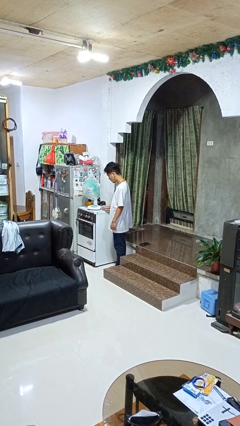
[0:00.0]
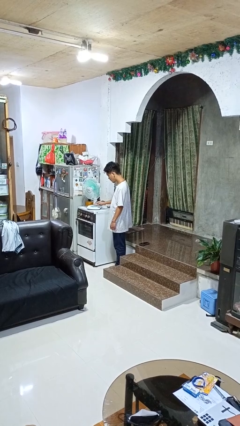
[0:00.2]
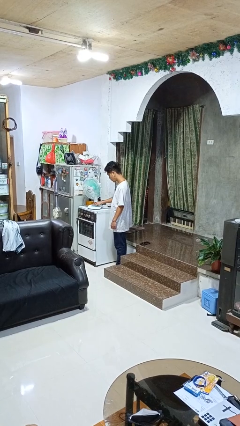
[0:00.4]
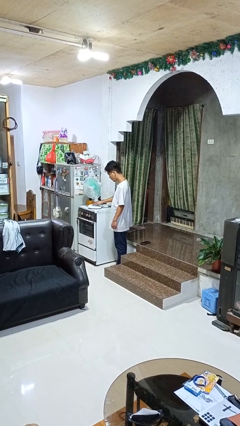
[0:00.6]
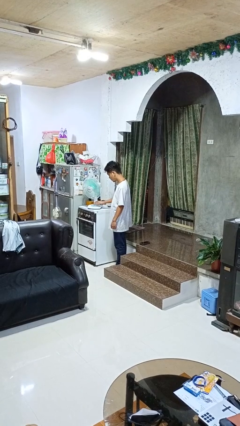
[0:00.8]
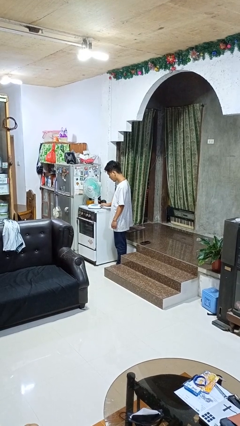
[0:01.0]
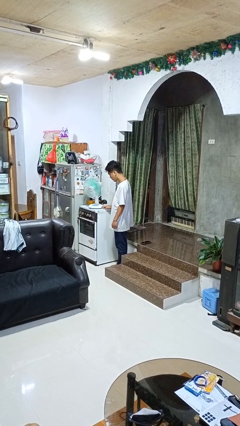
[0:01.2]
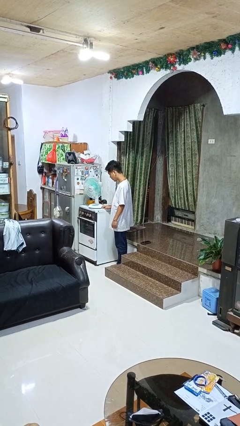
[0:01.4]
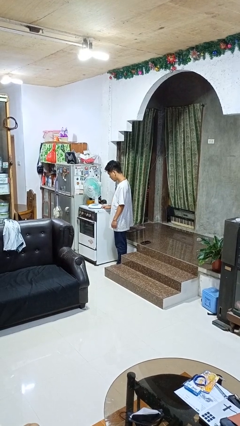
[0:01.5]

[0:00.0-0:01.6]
person turns off fan

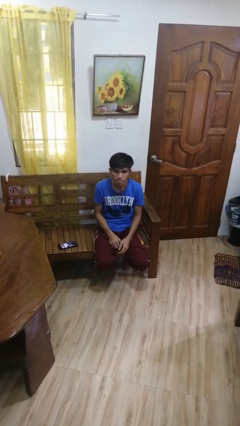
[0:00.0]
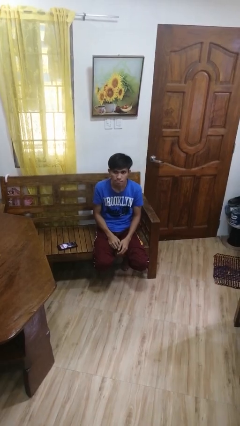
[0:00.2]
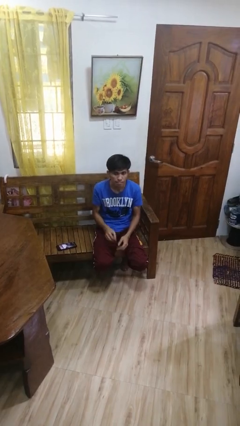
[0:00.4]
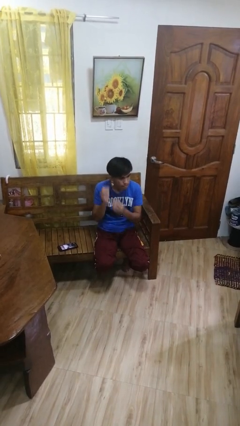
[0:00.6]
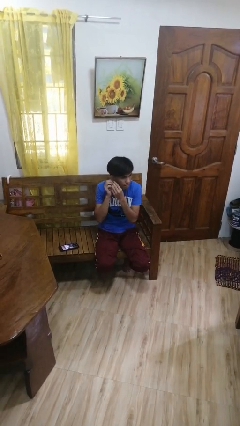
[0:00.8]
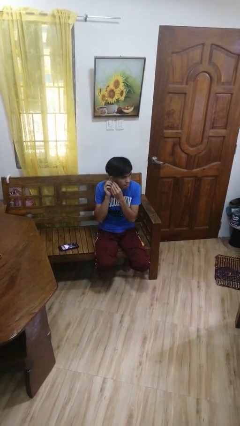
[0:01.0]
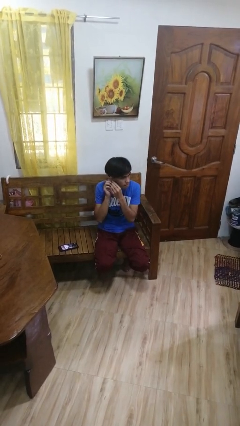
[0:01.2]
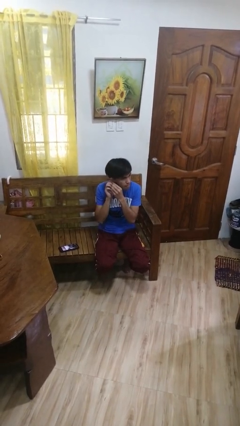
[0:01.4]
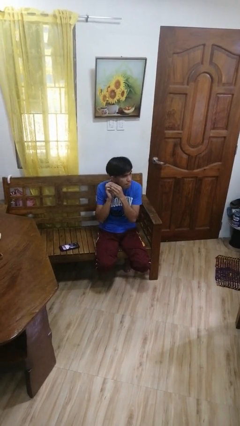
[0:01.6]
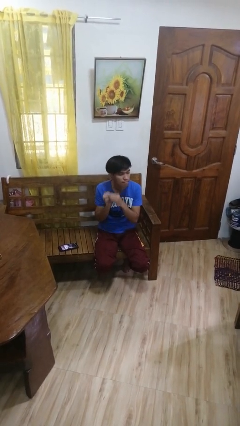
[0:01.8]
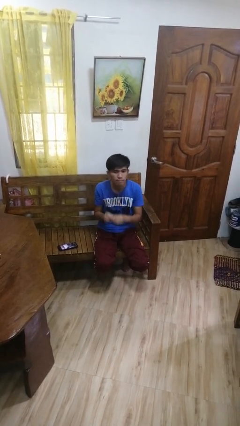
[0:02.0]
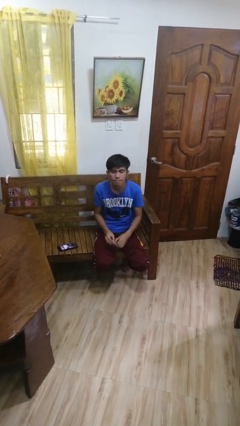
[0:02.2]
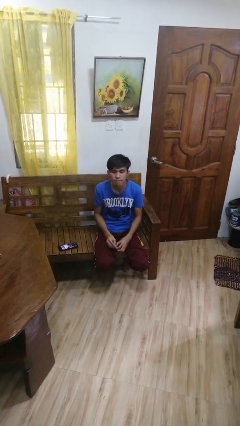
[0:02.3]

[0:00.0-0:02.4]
person takes off earrings

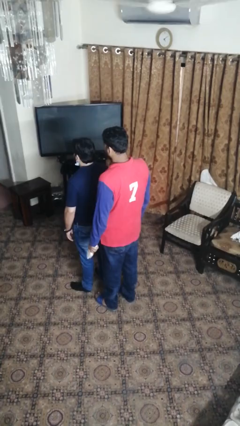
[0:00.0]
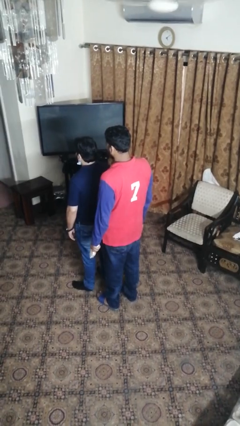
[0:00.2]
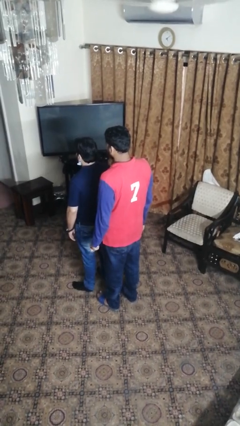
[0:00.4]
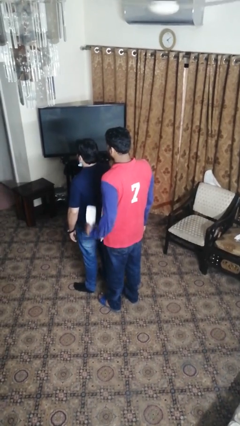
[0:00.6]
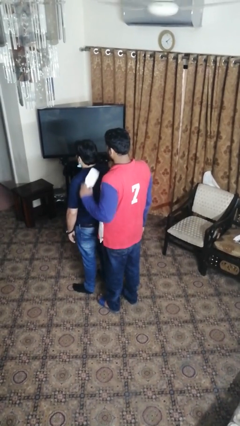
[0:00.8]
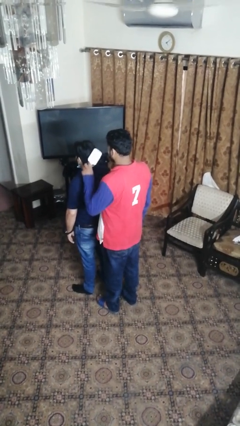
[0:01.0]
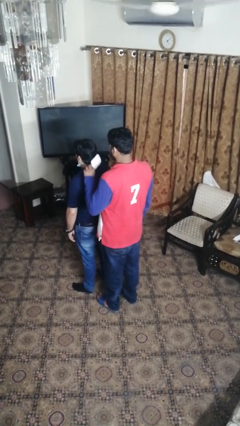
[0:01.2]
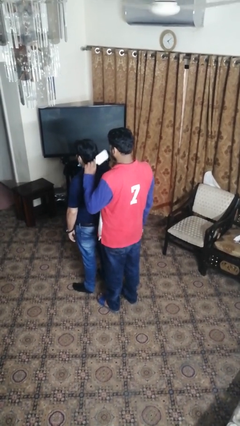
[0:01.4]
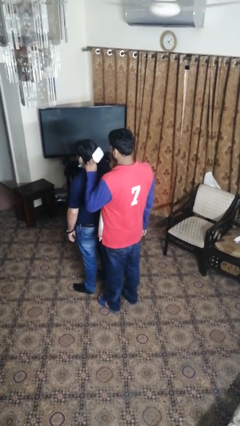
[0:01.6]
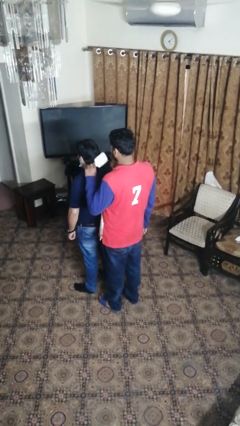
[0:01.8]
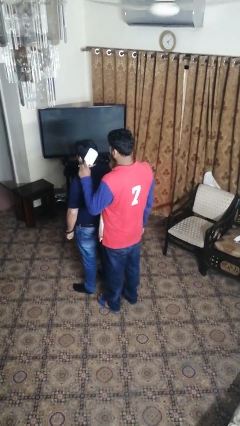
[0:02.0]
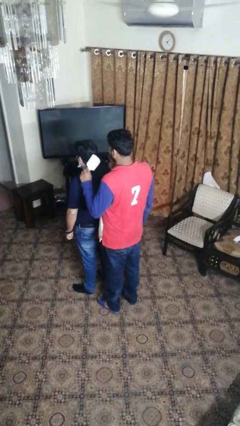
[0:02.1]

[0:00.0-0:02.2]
person brushes hair of person

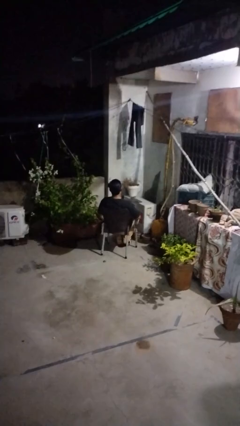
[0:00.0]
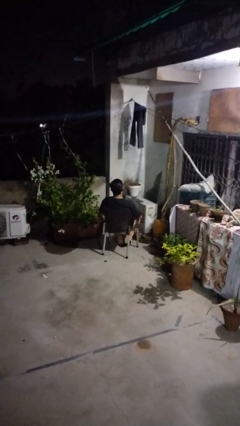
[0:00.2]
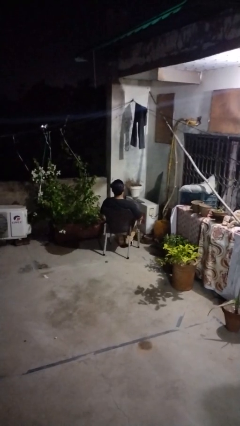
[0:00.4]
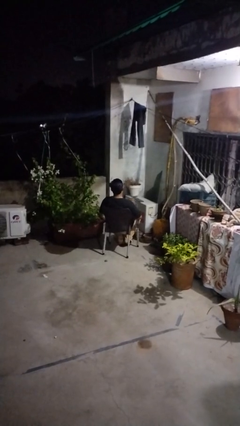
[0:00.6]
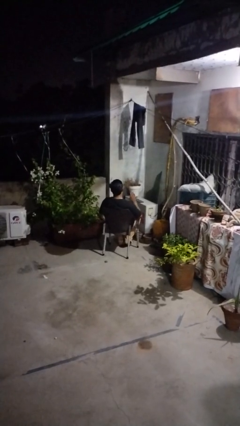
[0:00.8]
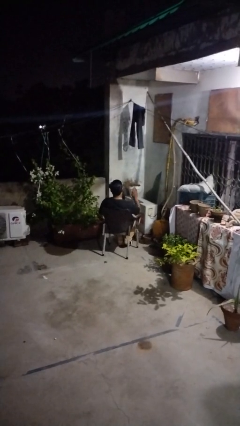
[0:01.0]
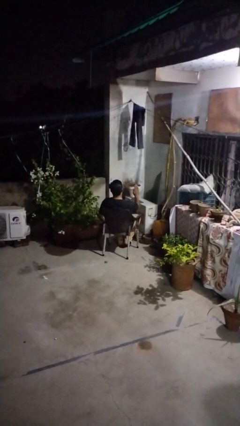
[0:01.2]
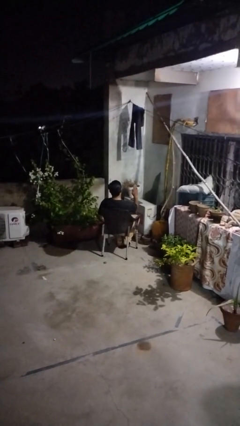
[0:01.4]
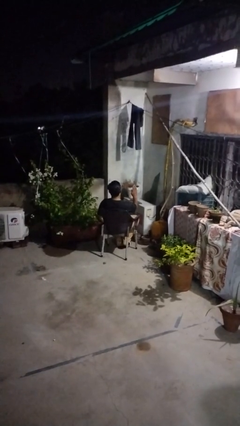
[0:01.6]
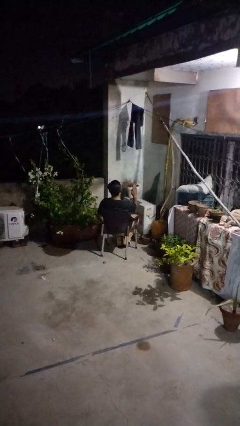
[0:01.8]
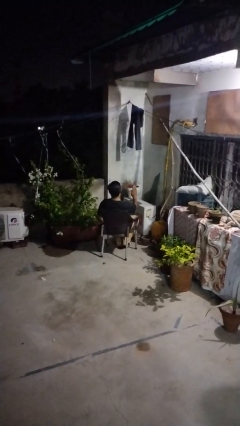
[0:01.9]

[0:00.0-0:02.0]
person gestures stop

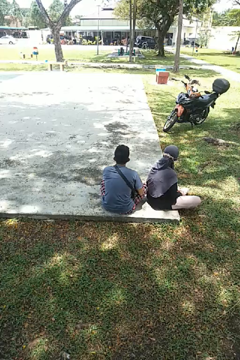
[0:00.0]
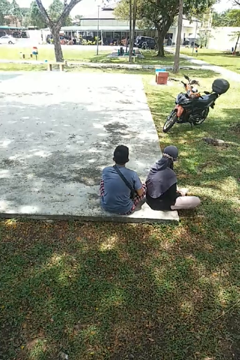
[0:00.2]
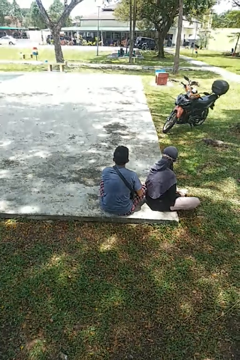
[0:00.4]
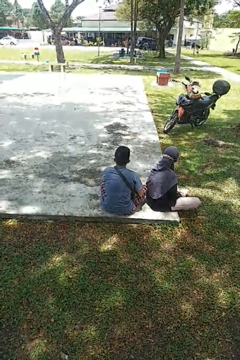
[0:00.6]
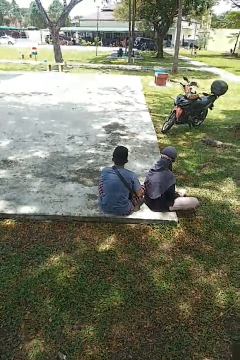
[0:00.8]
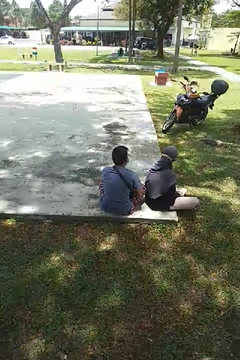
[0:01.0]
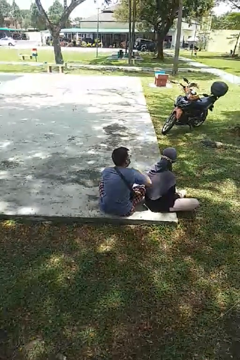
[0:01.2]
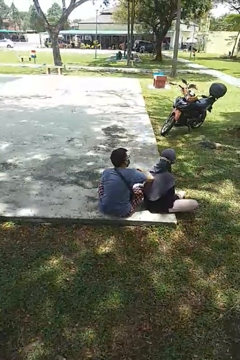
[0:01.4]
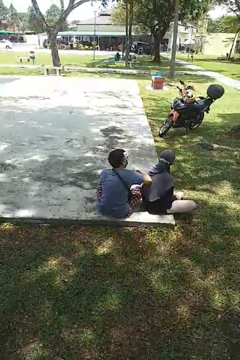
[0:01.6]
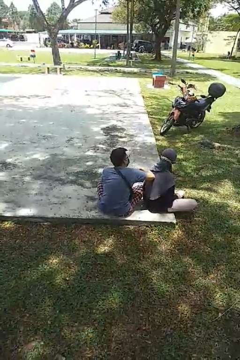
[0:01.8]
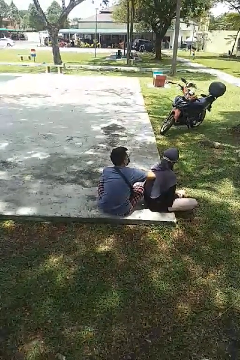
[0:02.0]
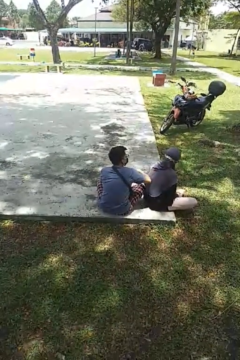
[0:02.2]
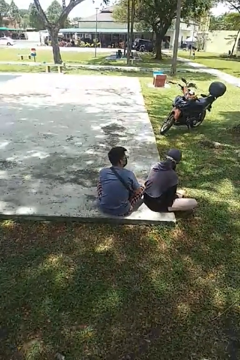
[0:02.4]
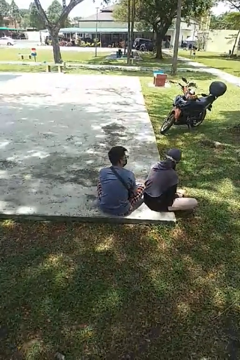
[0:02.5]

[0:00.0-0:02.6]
person nudges person with elbow

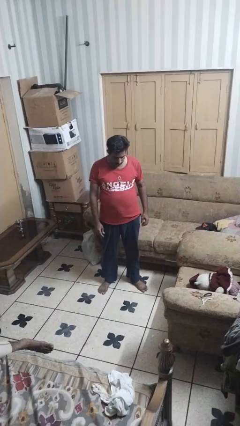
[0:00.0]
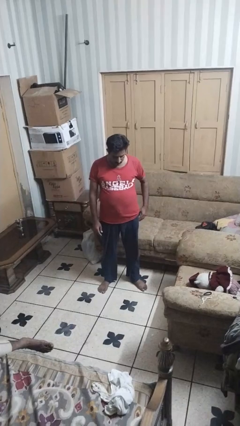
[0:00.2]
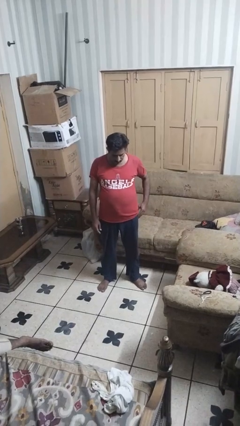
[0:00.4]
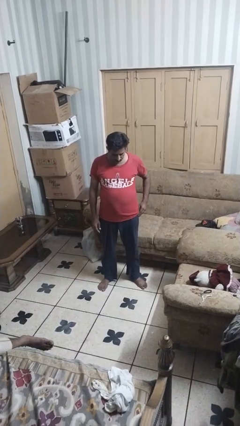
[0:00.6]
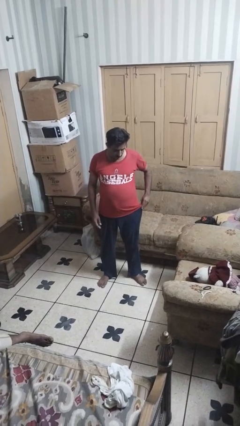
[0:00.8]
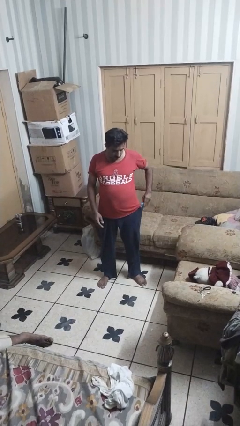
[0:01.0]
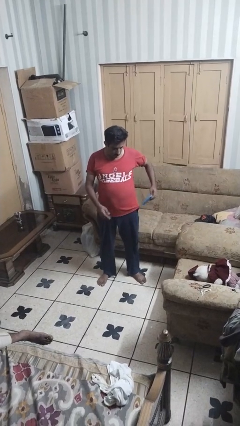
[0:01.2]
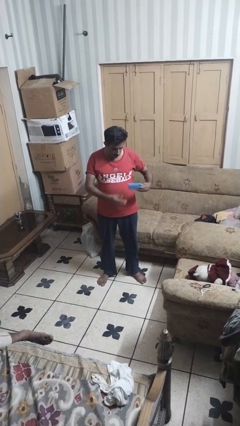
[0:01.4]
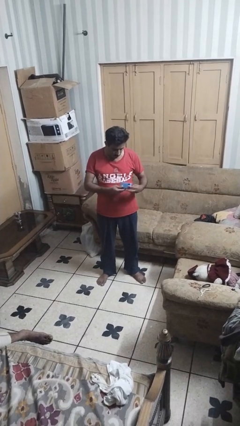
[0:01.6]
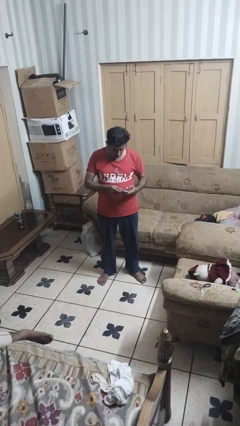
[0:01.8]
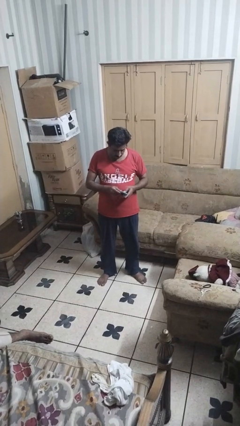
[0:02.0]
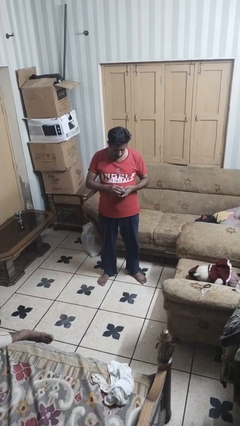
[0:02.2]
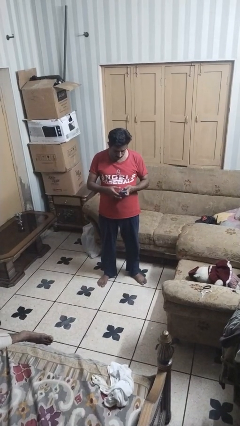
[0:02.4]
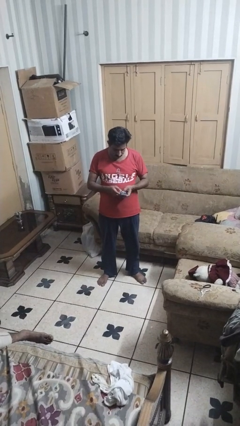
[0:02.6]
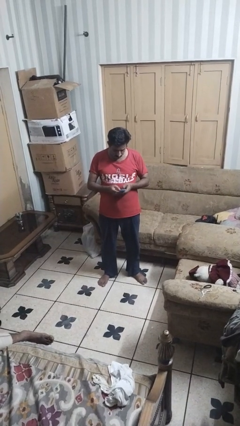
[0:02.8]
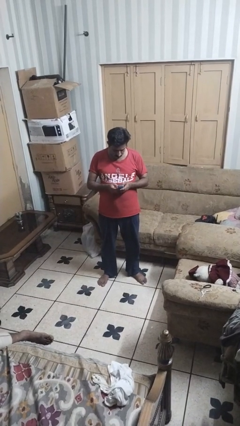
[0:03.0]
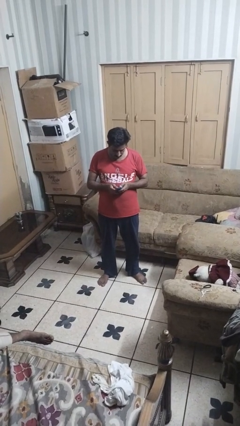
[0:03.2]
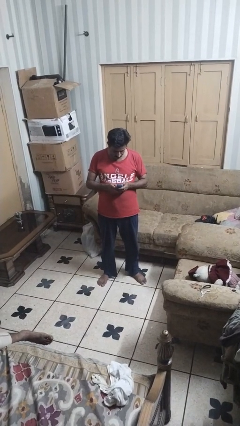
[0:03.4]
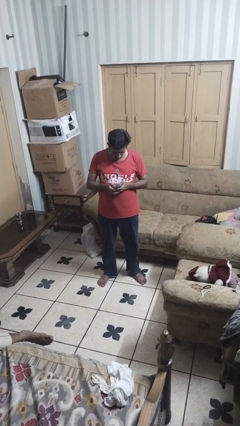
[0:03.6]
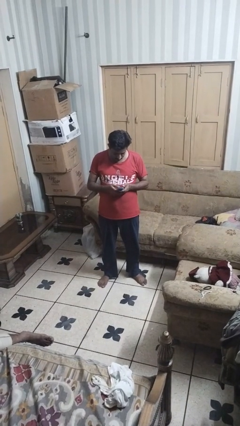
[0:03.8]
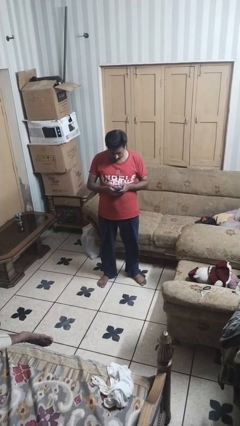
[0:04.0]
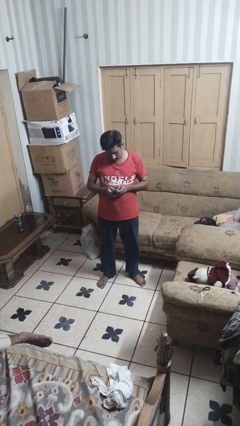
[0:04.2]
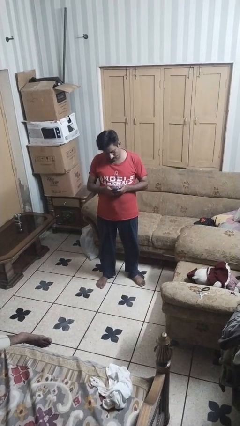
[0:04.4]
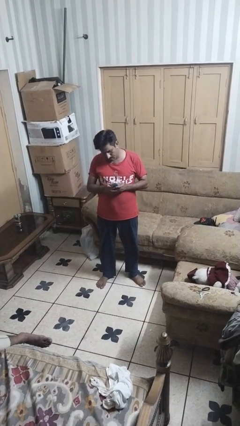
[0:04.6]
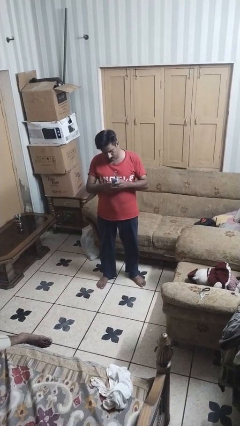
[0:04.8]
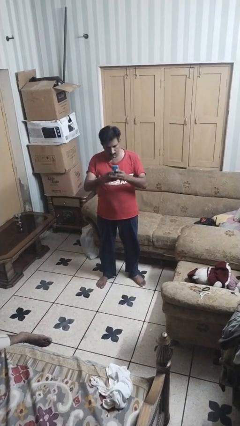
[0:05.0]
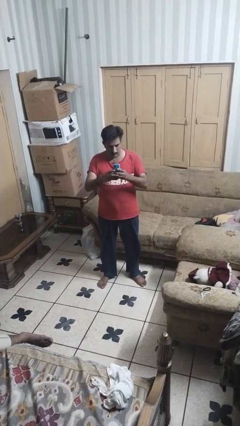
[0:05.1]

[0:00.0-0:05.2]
person takes phone from pocket

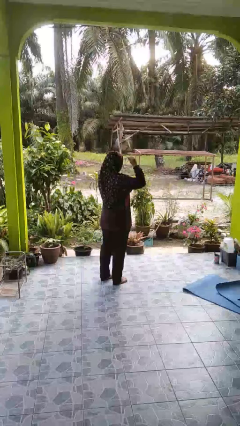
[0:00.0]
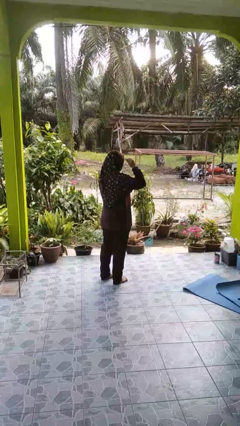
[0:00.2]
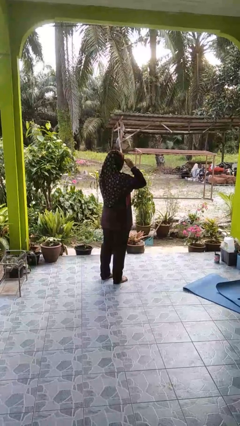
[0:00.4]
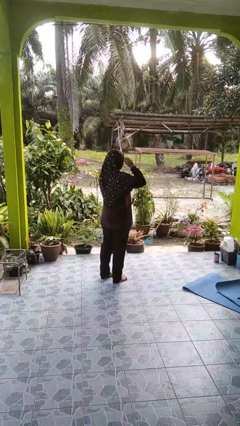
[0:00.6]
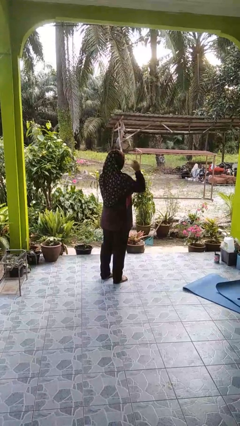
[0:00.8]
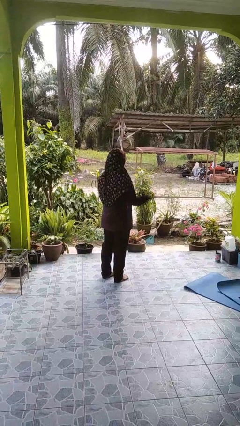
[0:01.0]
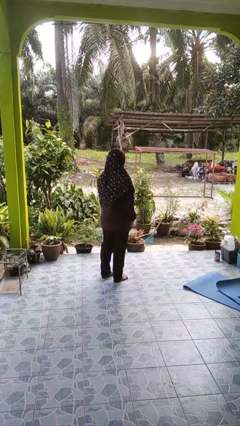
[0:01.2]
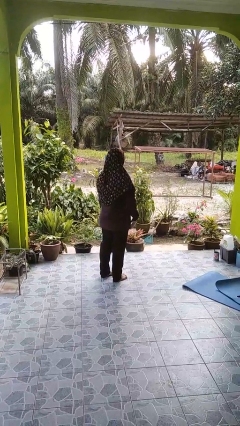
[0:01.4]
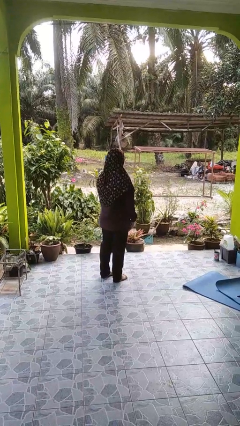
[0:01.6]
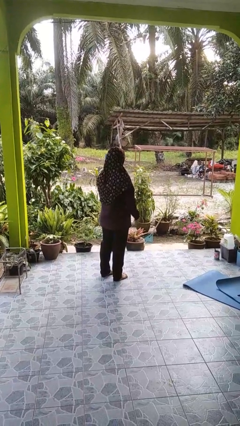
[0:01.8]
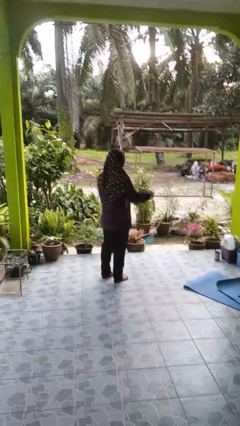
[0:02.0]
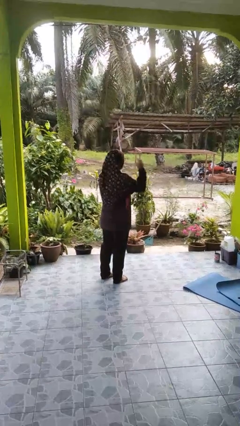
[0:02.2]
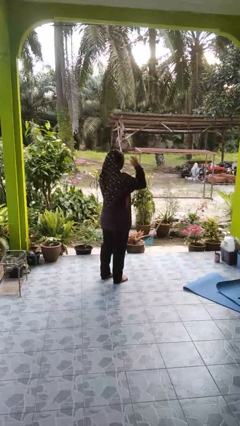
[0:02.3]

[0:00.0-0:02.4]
person puts on glasses
